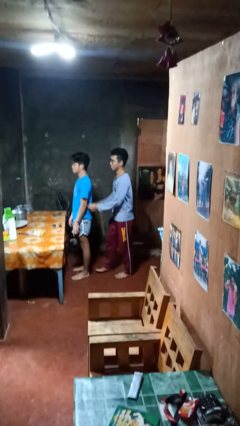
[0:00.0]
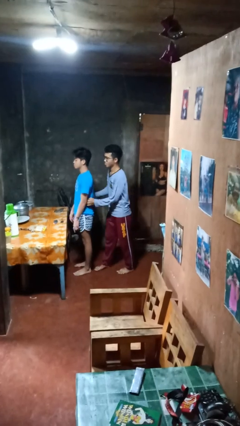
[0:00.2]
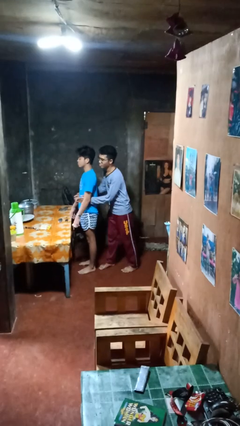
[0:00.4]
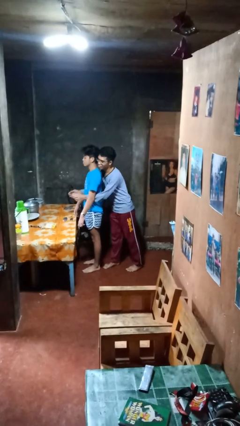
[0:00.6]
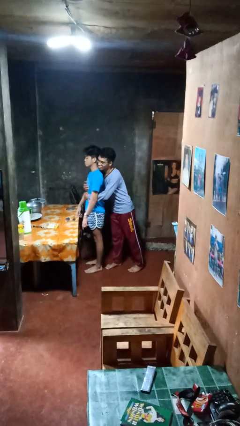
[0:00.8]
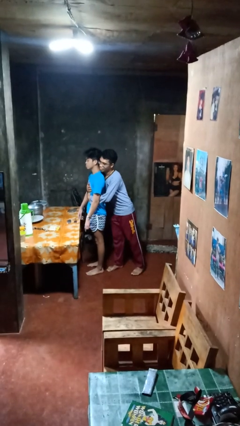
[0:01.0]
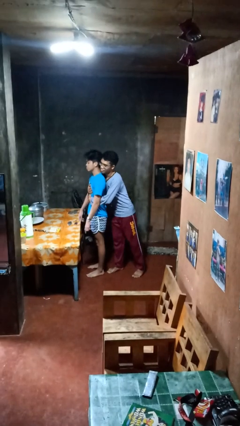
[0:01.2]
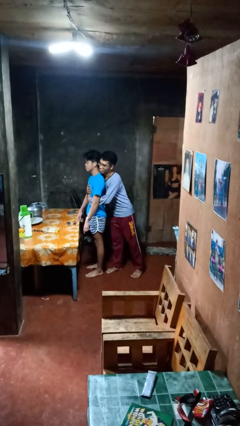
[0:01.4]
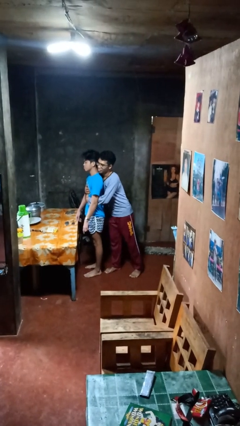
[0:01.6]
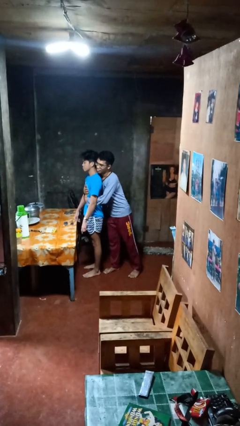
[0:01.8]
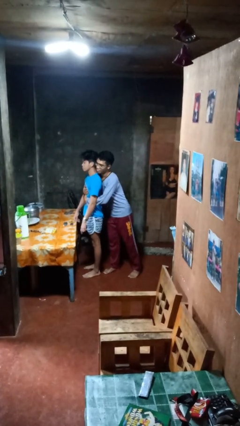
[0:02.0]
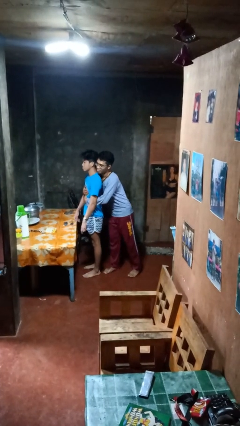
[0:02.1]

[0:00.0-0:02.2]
person hugs person from behind

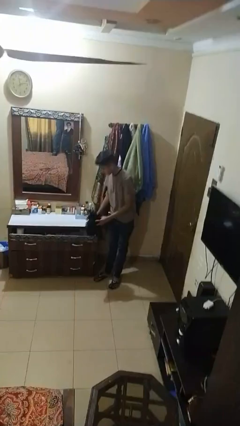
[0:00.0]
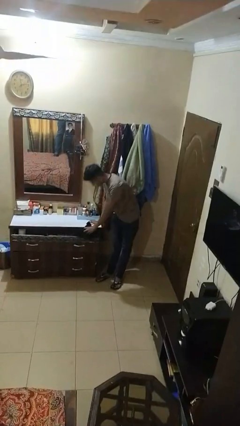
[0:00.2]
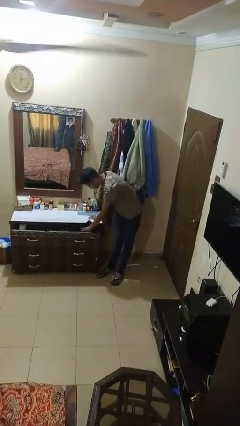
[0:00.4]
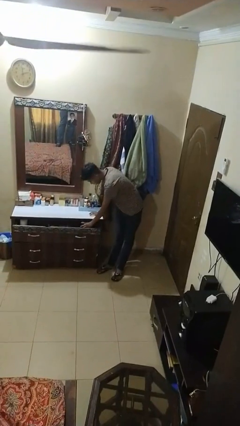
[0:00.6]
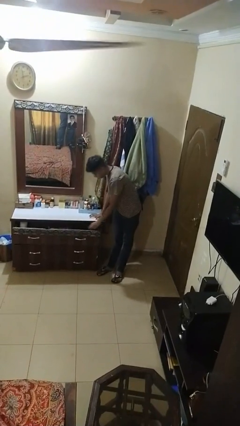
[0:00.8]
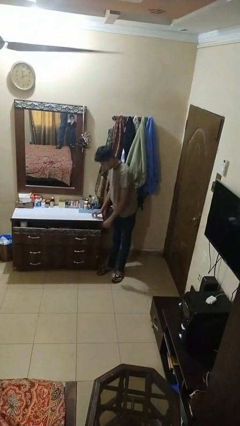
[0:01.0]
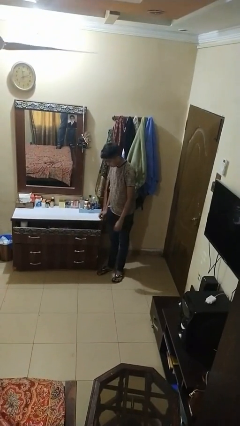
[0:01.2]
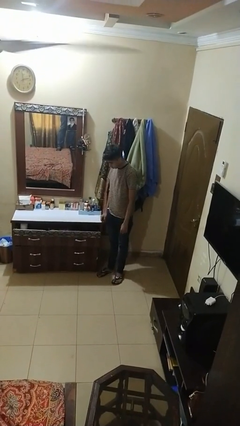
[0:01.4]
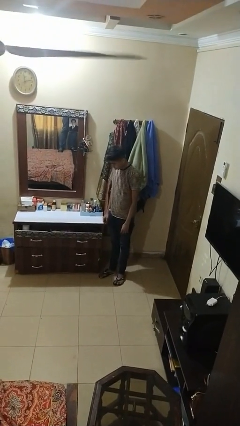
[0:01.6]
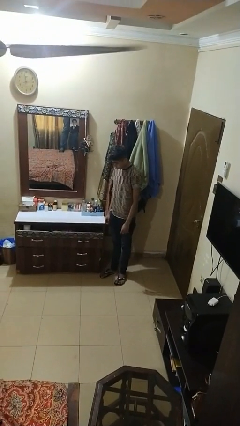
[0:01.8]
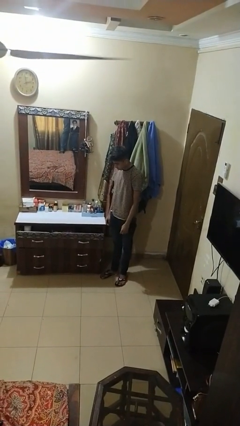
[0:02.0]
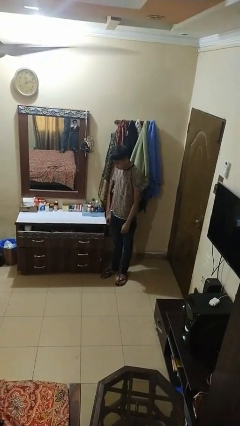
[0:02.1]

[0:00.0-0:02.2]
person puts clothes into dresser

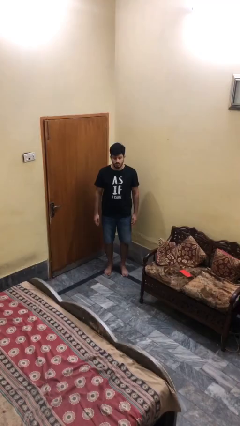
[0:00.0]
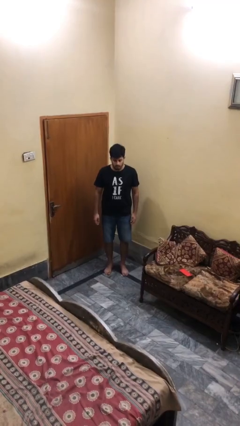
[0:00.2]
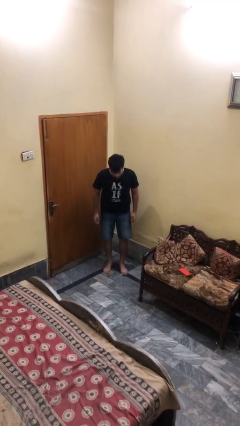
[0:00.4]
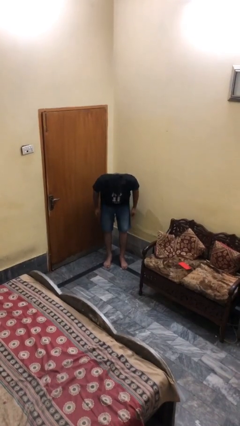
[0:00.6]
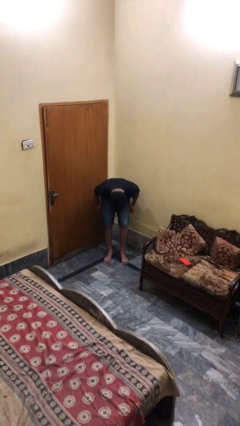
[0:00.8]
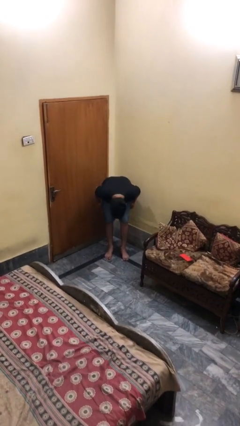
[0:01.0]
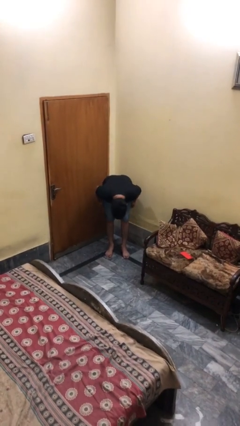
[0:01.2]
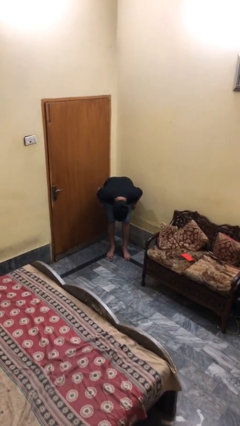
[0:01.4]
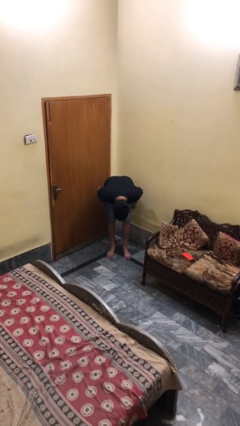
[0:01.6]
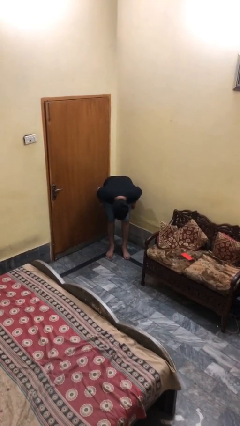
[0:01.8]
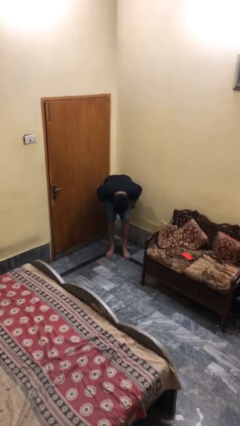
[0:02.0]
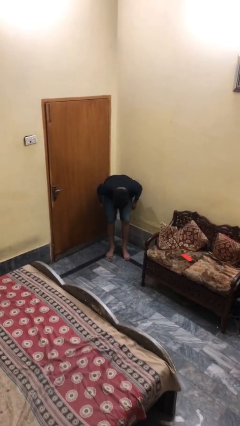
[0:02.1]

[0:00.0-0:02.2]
person bows

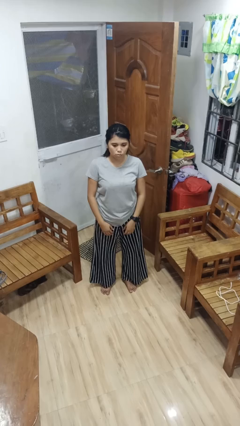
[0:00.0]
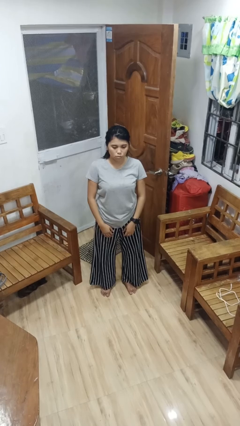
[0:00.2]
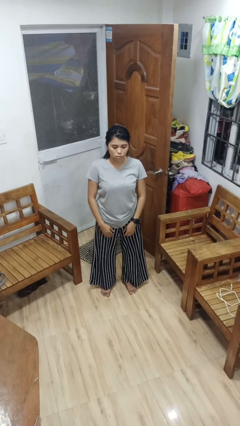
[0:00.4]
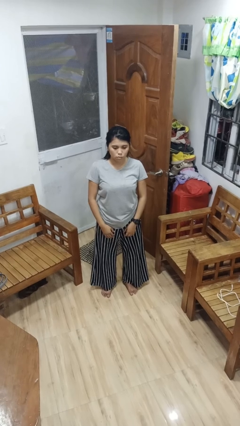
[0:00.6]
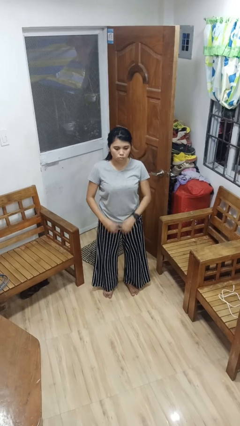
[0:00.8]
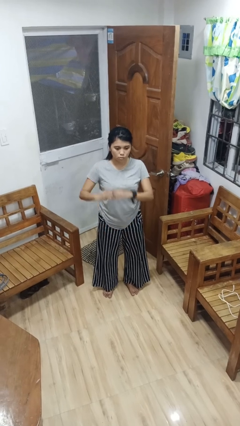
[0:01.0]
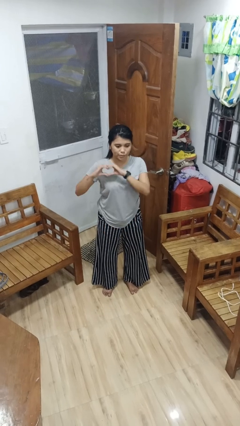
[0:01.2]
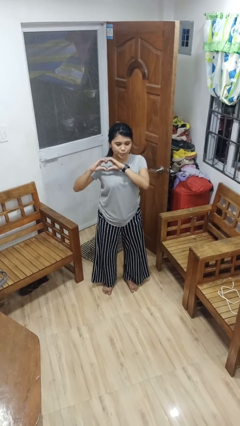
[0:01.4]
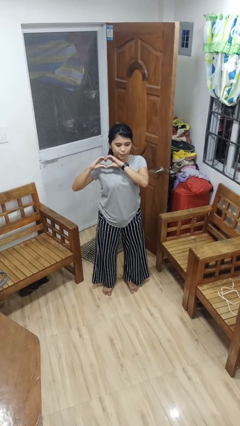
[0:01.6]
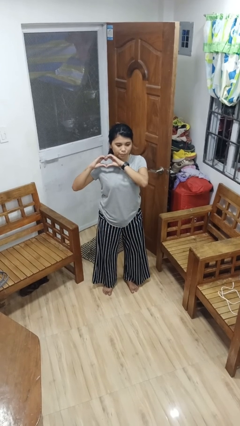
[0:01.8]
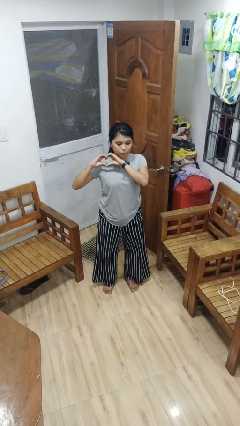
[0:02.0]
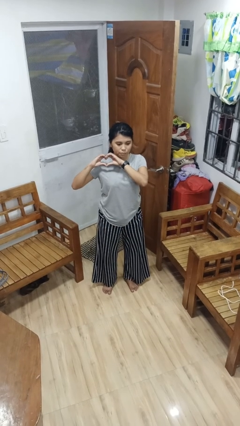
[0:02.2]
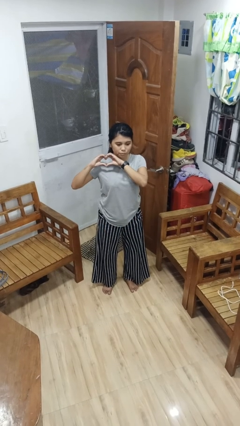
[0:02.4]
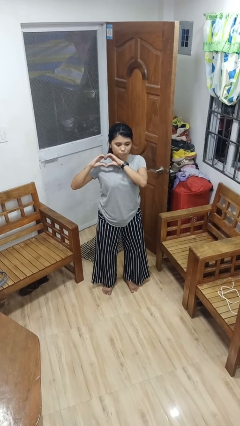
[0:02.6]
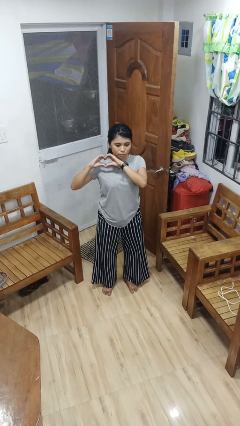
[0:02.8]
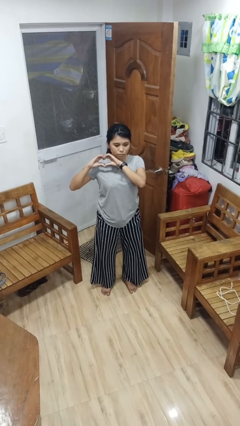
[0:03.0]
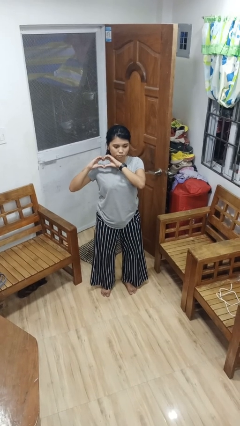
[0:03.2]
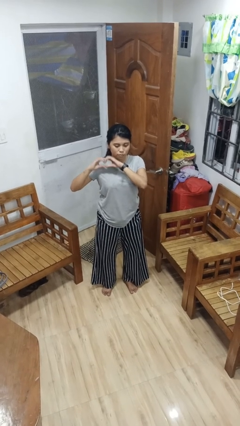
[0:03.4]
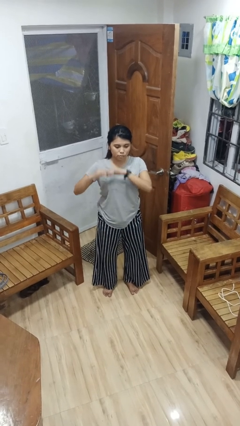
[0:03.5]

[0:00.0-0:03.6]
person gestures heart

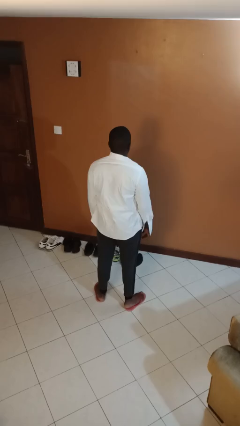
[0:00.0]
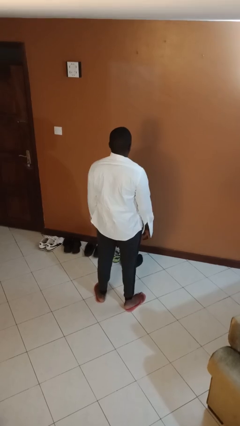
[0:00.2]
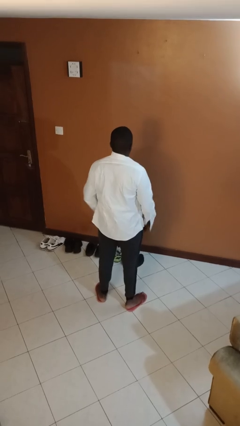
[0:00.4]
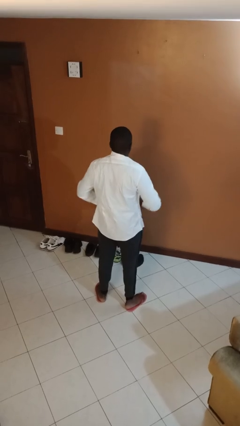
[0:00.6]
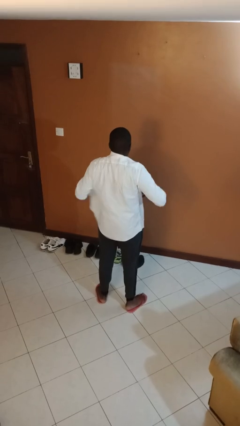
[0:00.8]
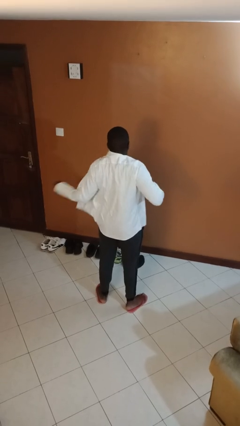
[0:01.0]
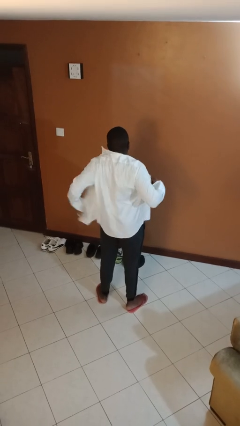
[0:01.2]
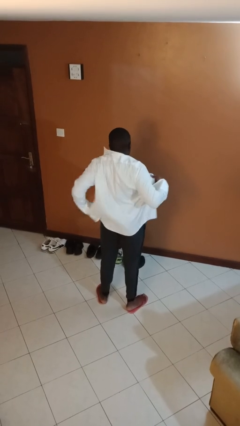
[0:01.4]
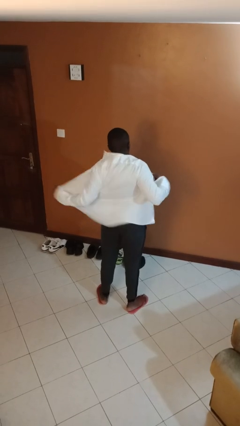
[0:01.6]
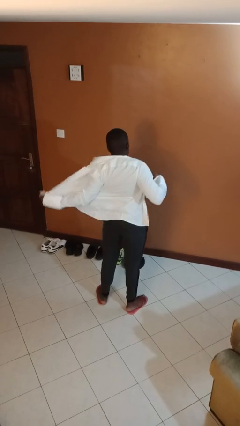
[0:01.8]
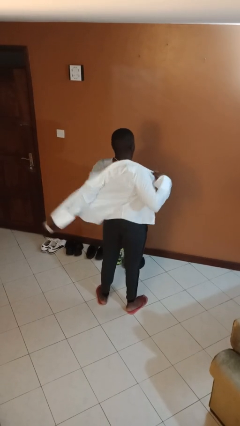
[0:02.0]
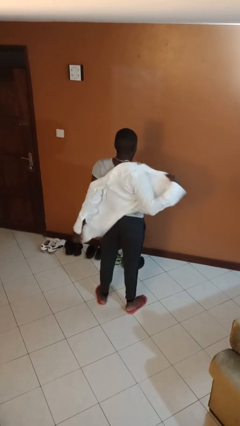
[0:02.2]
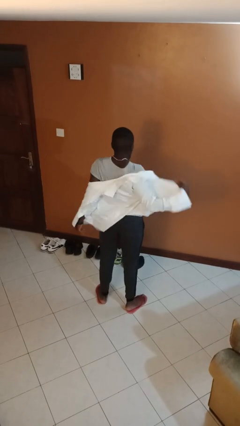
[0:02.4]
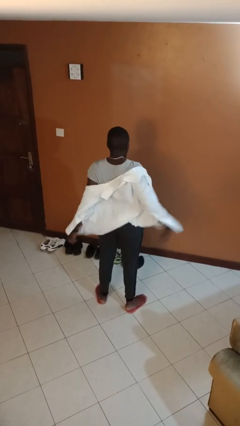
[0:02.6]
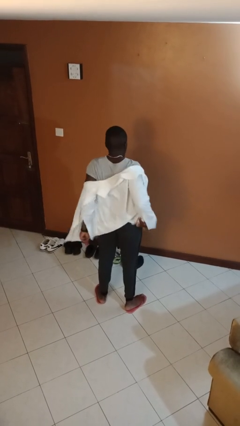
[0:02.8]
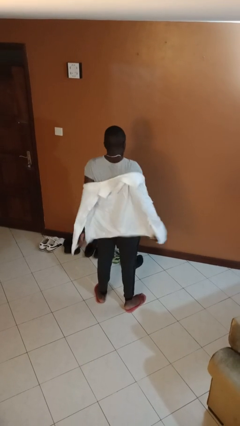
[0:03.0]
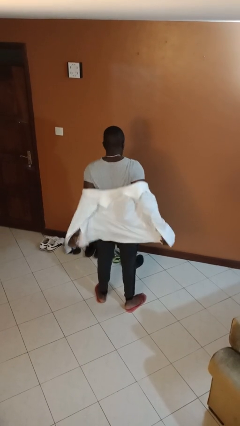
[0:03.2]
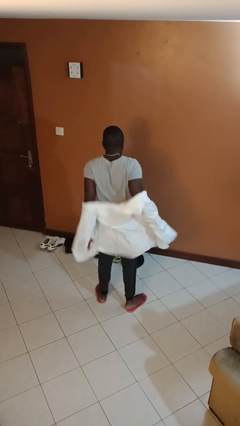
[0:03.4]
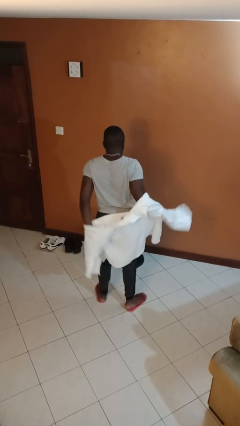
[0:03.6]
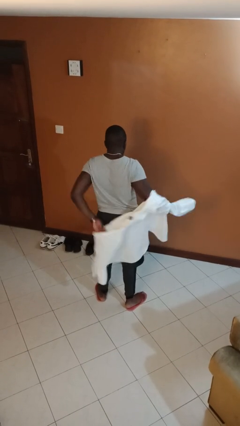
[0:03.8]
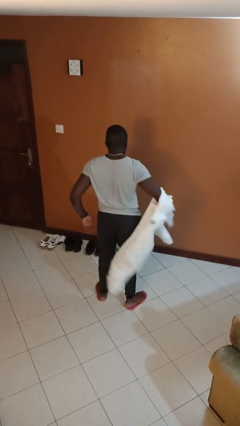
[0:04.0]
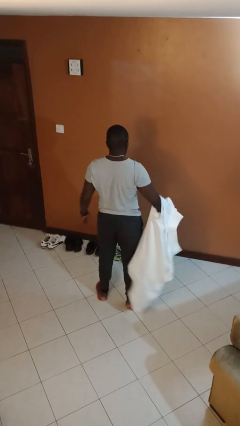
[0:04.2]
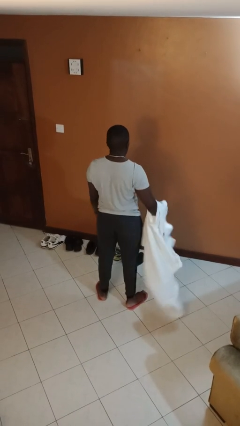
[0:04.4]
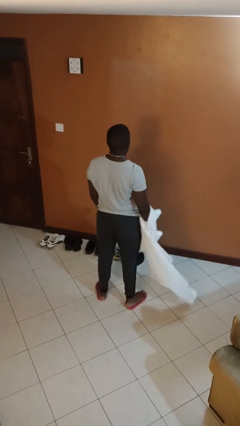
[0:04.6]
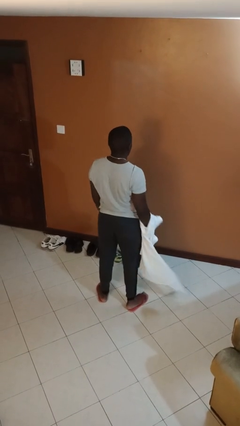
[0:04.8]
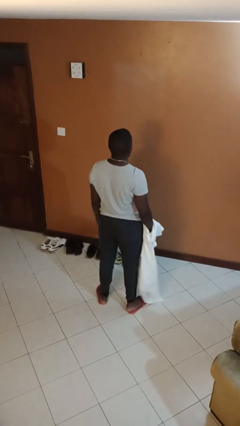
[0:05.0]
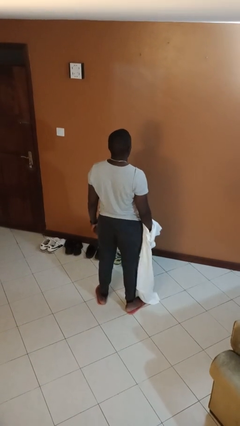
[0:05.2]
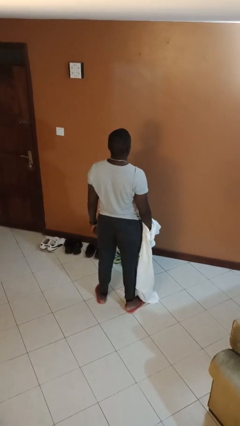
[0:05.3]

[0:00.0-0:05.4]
person takes off shirt

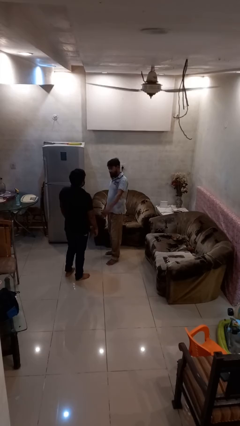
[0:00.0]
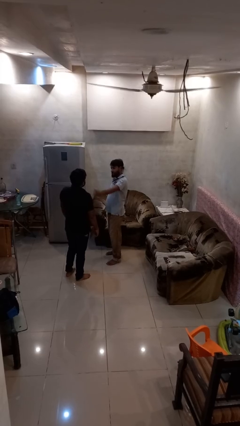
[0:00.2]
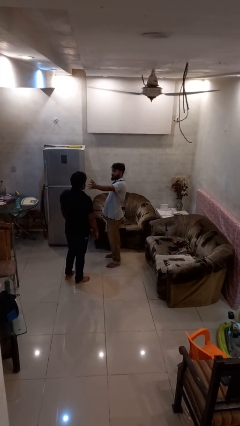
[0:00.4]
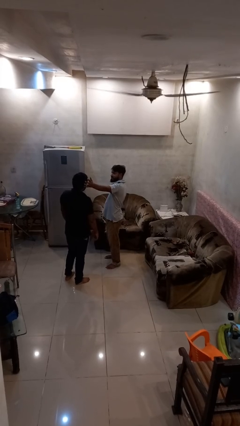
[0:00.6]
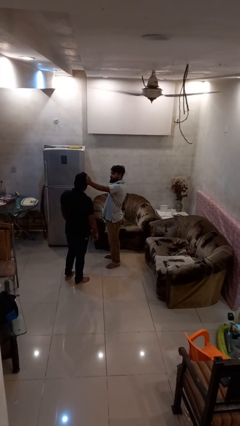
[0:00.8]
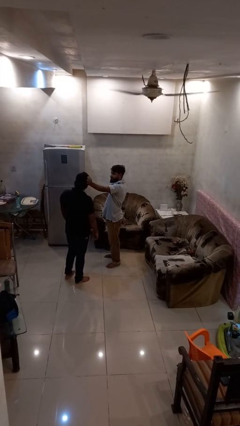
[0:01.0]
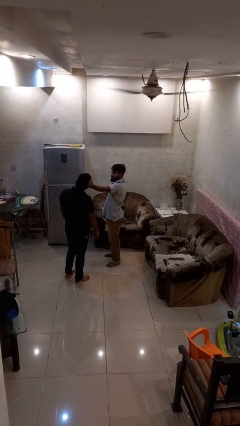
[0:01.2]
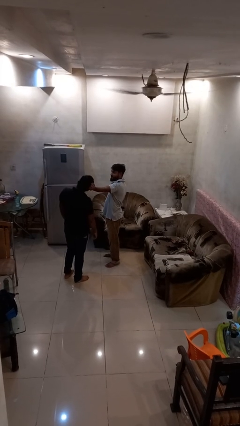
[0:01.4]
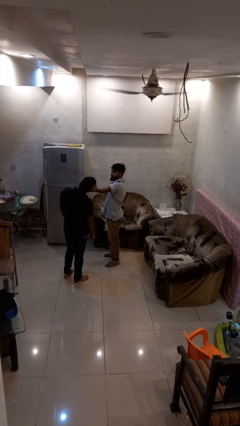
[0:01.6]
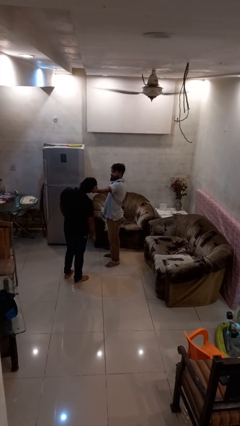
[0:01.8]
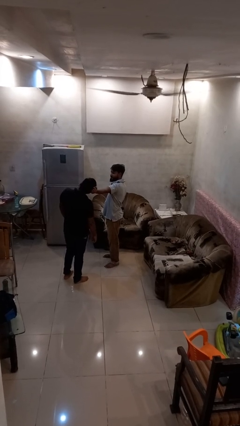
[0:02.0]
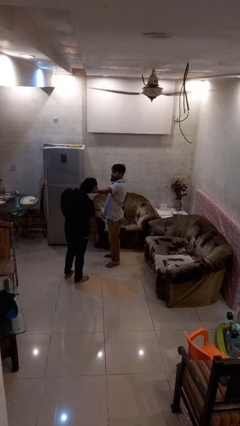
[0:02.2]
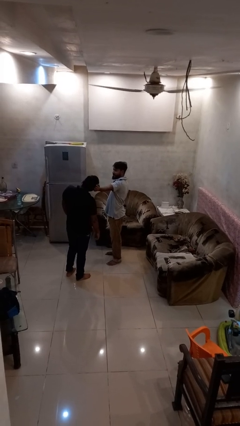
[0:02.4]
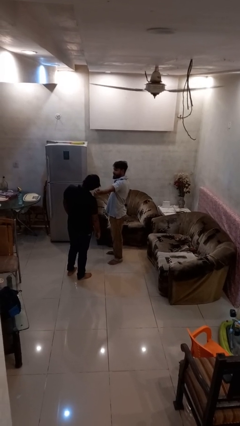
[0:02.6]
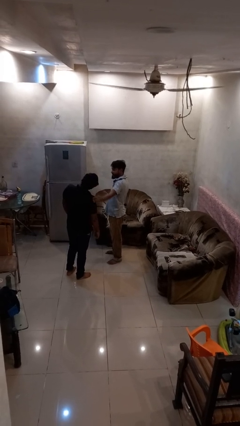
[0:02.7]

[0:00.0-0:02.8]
person grabs person by hair
